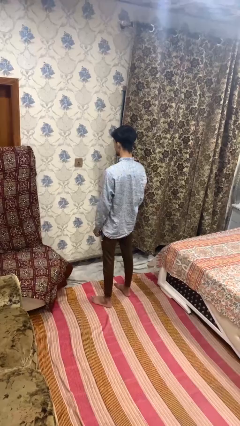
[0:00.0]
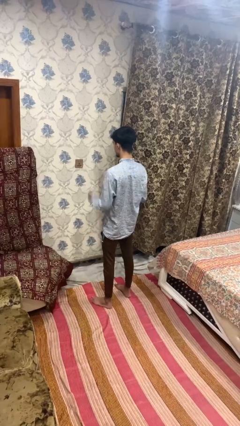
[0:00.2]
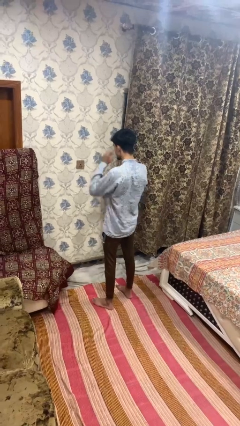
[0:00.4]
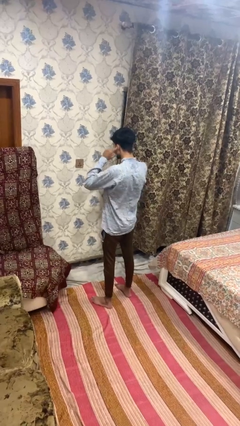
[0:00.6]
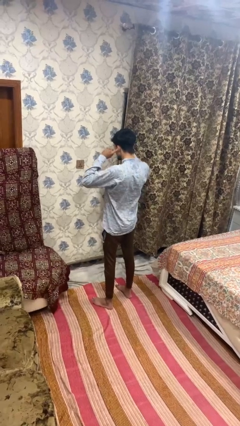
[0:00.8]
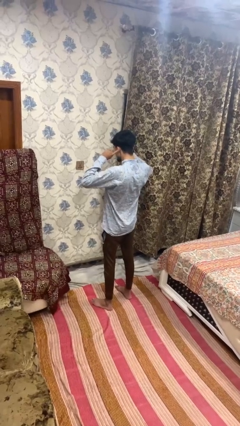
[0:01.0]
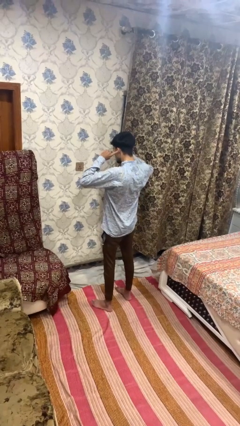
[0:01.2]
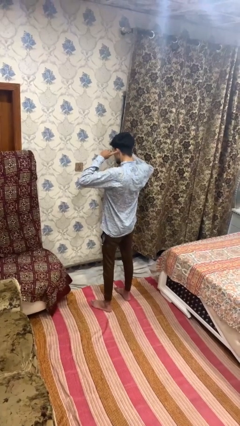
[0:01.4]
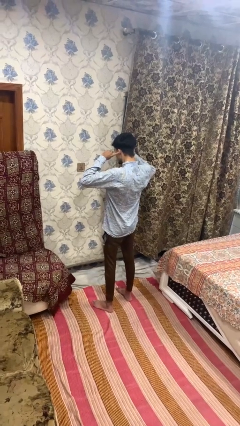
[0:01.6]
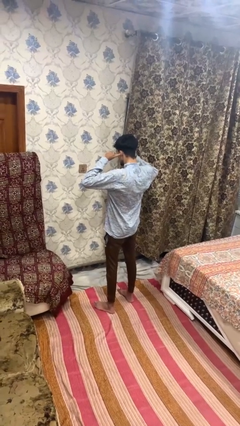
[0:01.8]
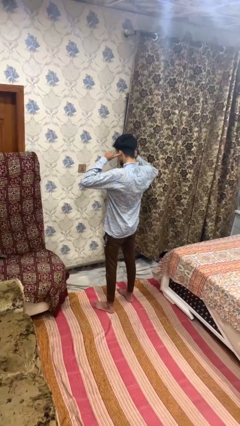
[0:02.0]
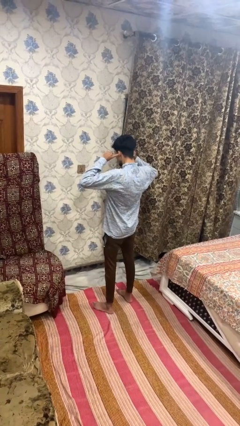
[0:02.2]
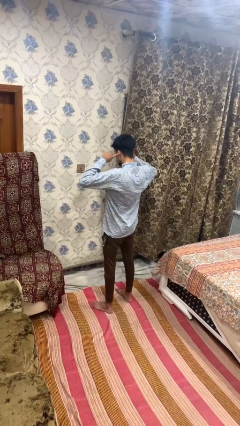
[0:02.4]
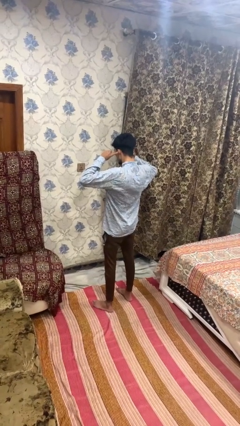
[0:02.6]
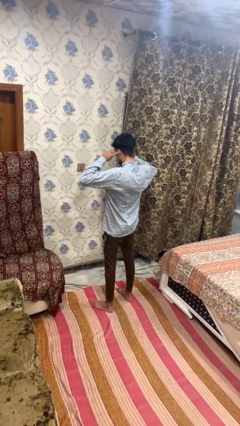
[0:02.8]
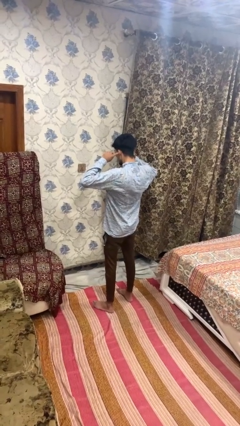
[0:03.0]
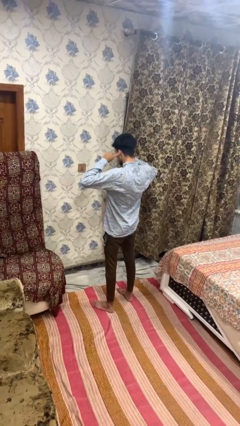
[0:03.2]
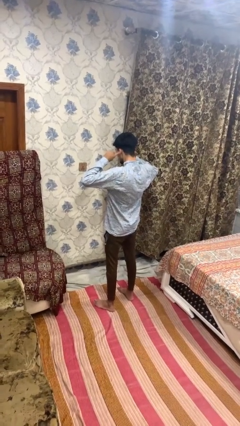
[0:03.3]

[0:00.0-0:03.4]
person puts fingers in ear

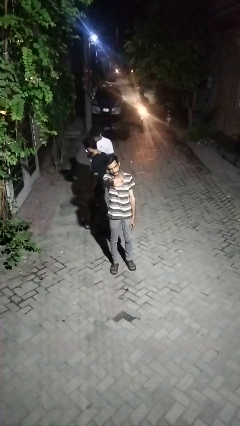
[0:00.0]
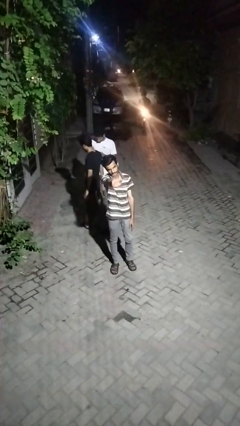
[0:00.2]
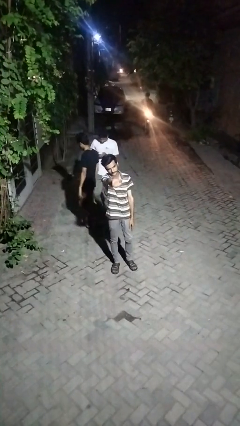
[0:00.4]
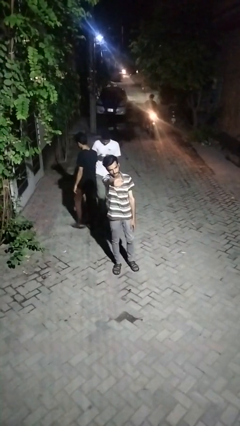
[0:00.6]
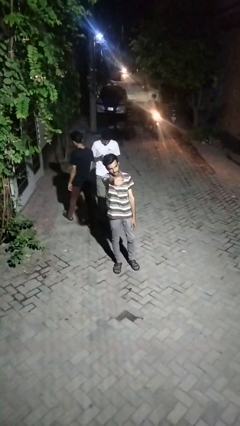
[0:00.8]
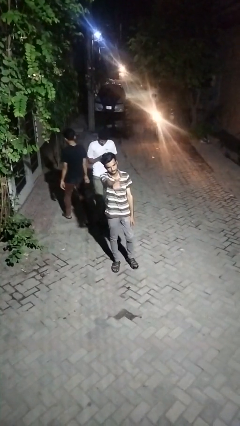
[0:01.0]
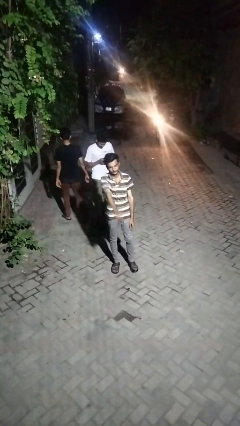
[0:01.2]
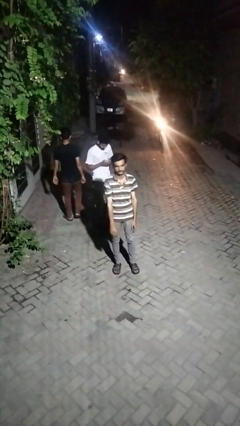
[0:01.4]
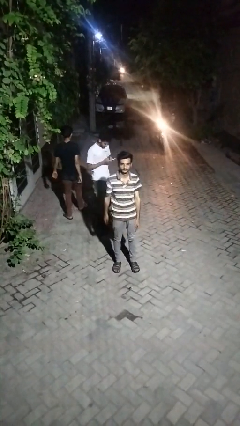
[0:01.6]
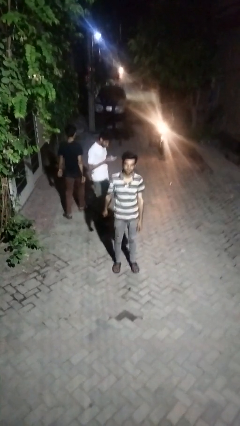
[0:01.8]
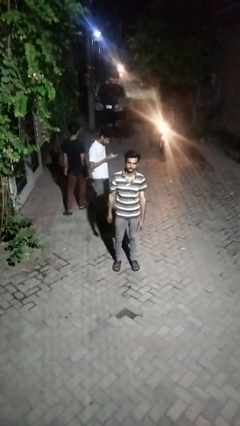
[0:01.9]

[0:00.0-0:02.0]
person waves at person

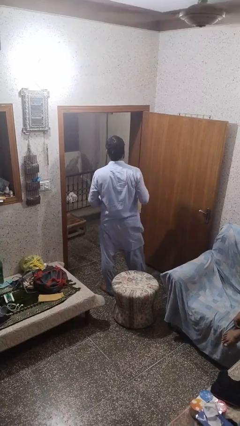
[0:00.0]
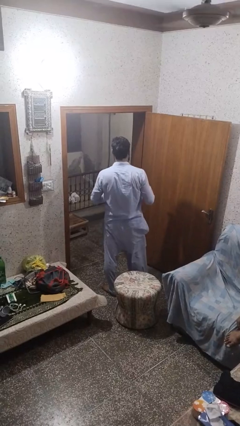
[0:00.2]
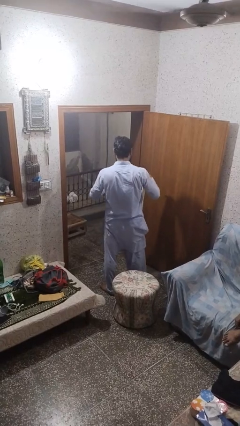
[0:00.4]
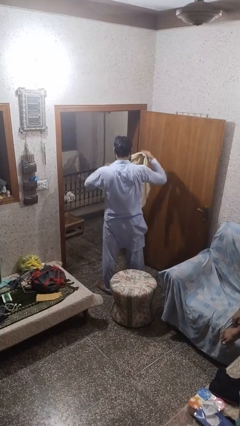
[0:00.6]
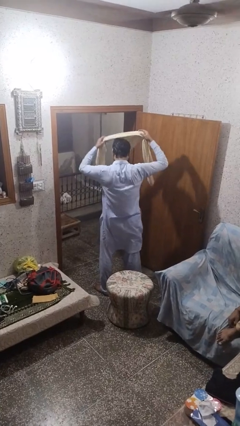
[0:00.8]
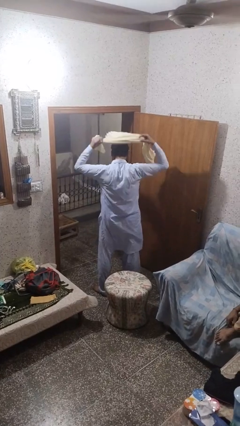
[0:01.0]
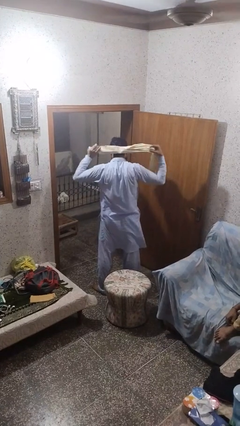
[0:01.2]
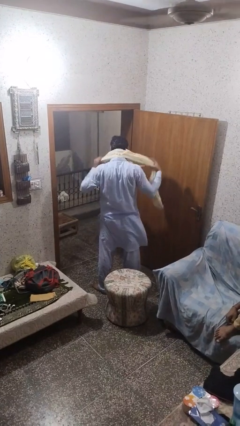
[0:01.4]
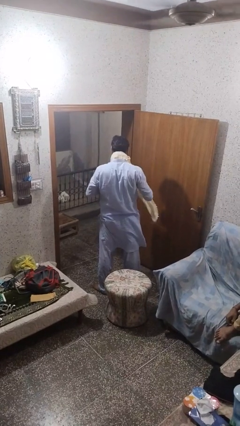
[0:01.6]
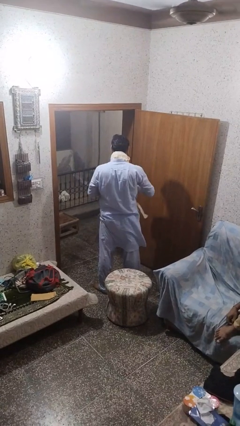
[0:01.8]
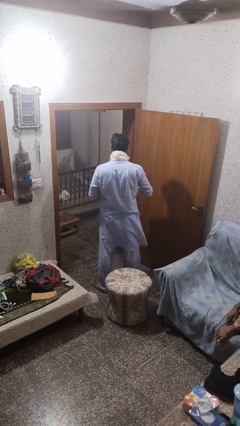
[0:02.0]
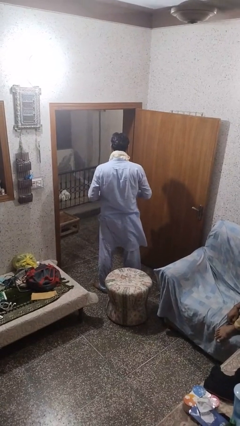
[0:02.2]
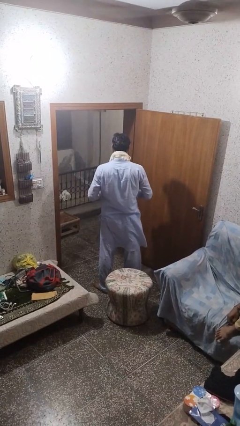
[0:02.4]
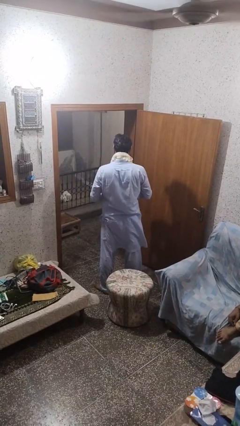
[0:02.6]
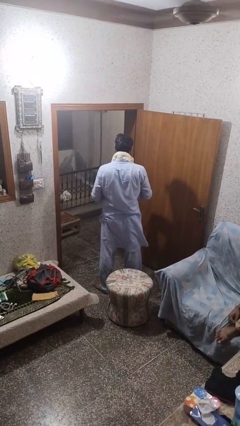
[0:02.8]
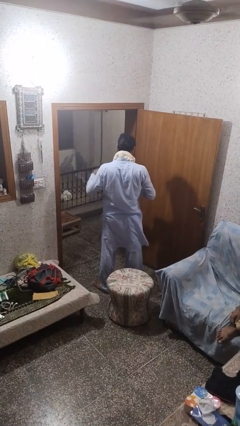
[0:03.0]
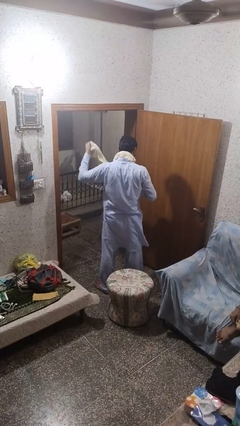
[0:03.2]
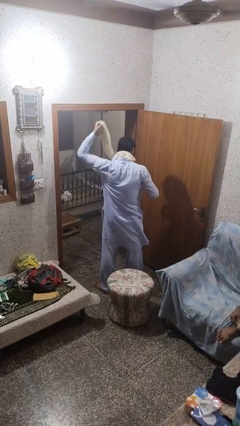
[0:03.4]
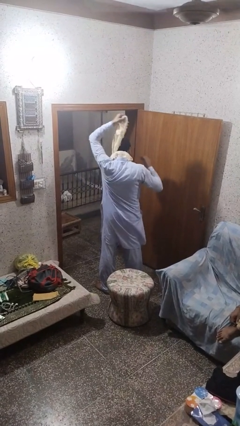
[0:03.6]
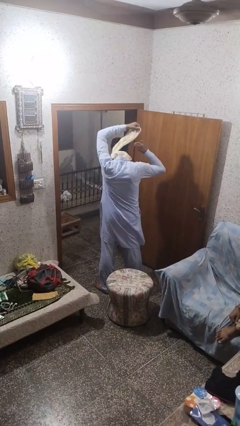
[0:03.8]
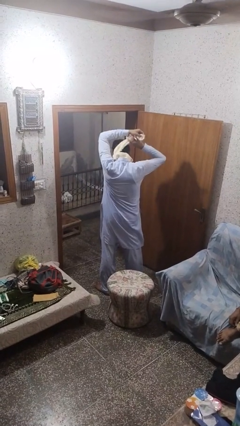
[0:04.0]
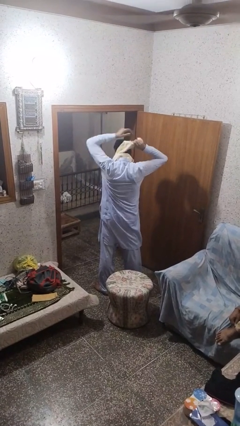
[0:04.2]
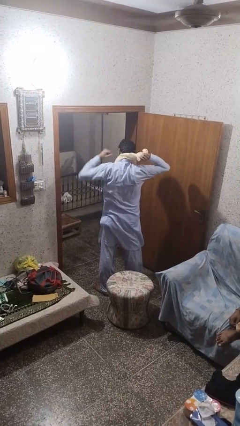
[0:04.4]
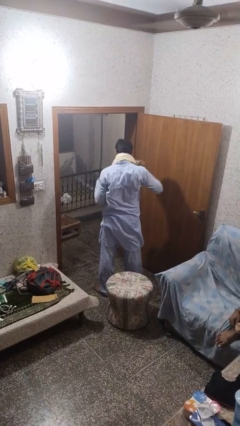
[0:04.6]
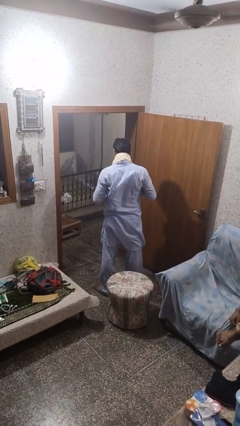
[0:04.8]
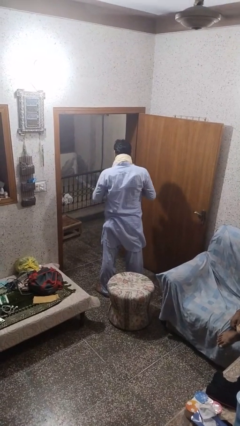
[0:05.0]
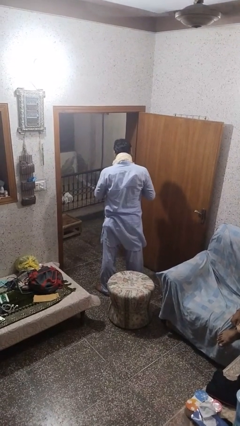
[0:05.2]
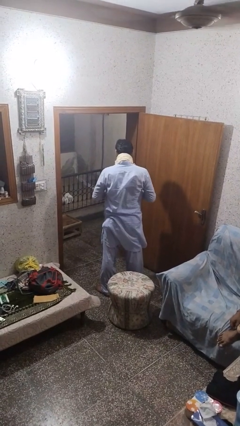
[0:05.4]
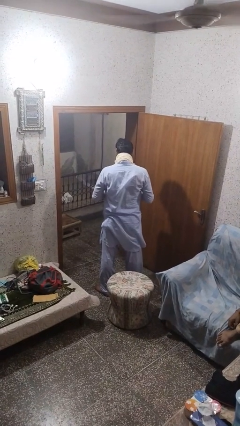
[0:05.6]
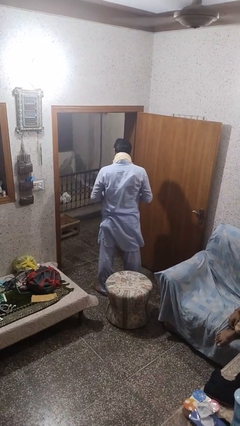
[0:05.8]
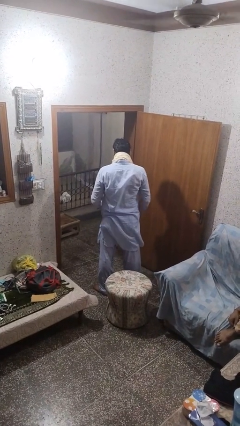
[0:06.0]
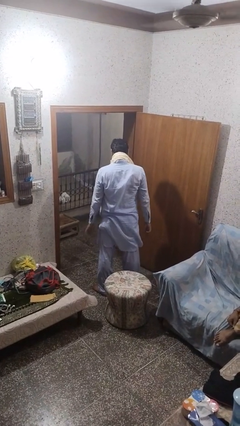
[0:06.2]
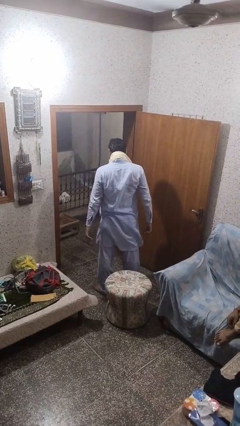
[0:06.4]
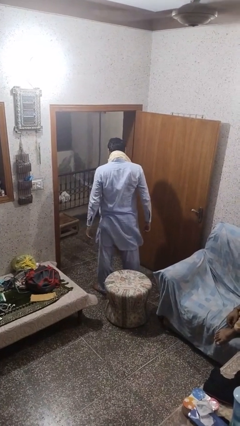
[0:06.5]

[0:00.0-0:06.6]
person puts on scarf

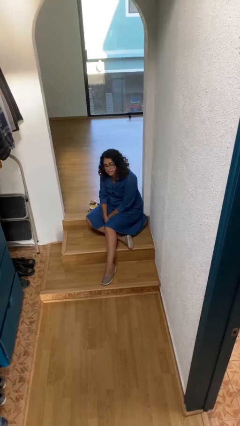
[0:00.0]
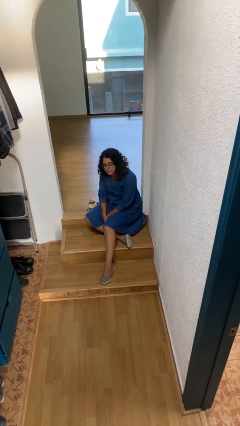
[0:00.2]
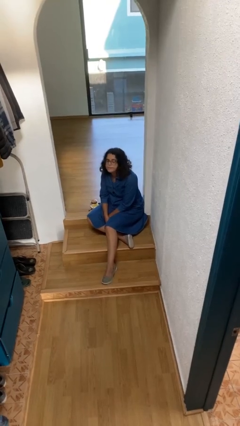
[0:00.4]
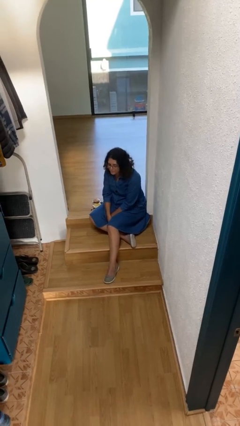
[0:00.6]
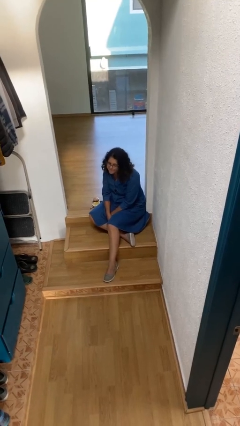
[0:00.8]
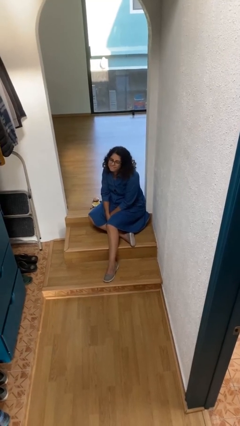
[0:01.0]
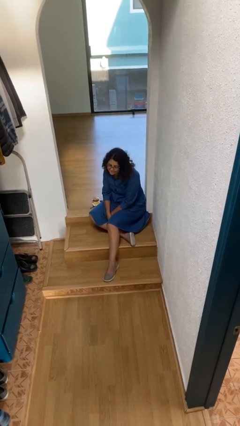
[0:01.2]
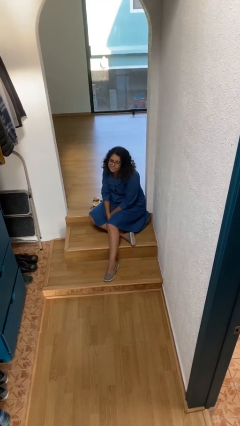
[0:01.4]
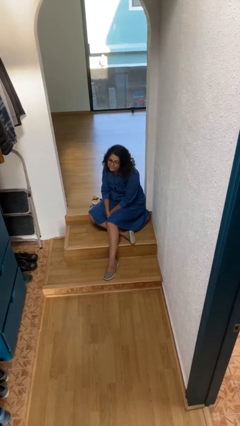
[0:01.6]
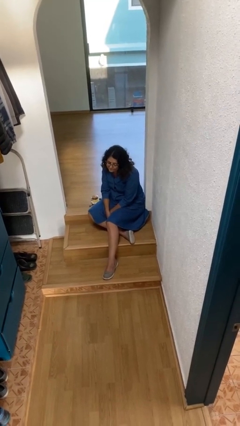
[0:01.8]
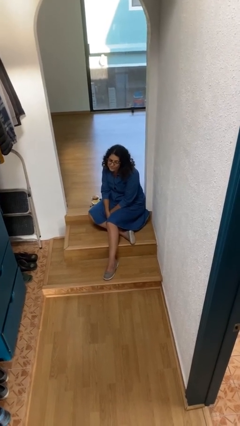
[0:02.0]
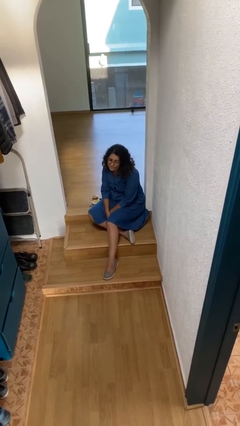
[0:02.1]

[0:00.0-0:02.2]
person nods head

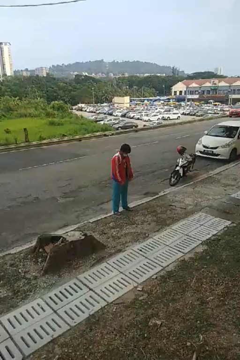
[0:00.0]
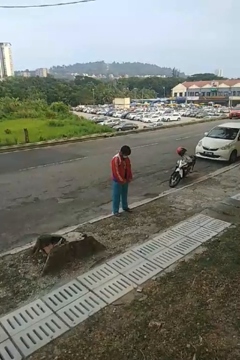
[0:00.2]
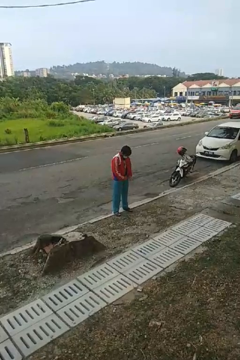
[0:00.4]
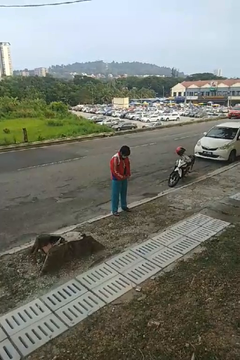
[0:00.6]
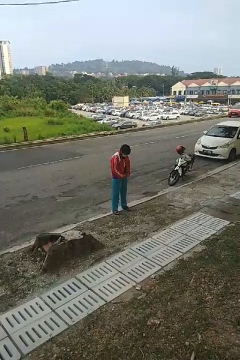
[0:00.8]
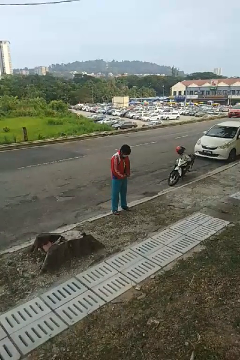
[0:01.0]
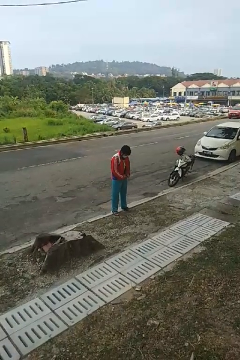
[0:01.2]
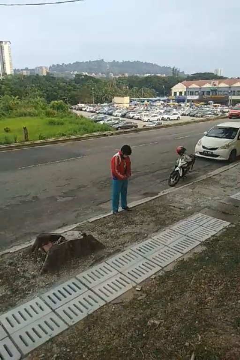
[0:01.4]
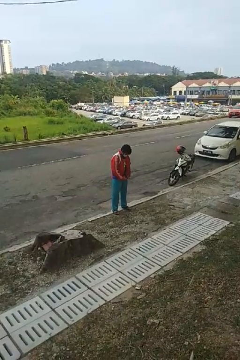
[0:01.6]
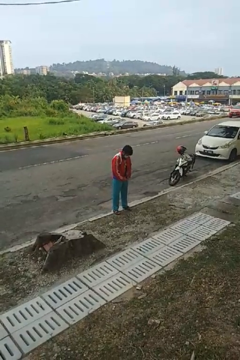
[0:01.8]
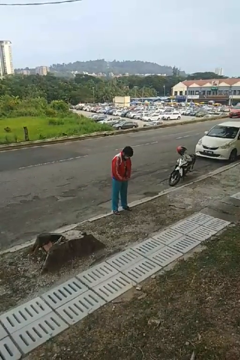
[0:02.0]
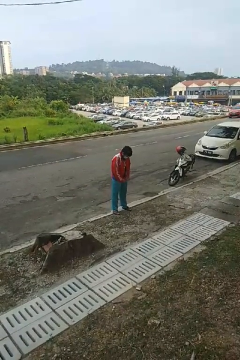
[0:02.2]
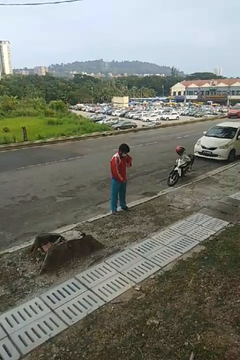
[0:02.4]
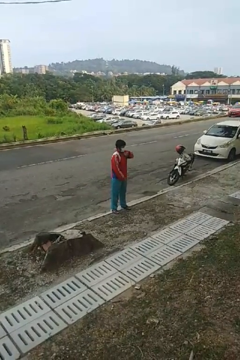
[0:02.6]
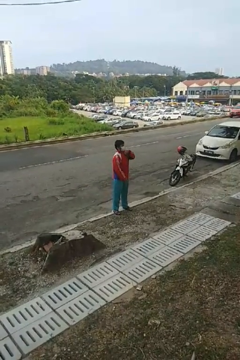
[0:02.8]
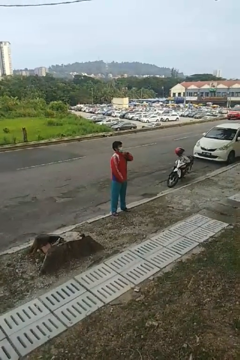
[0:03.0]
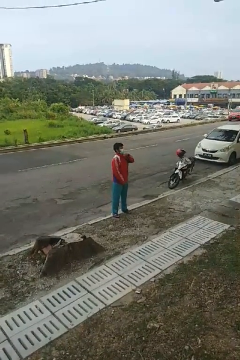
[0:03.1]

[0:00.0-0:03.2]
person zips up jacket

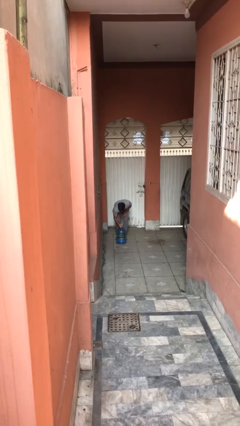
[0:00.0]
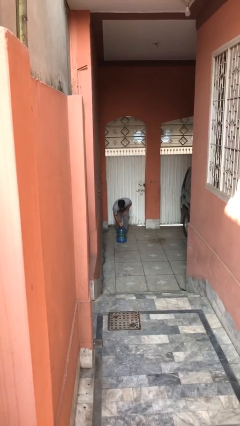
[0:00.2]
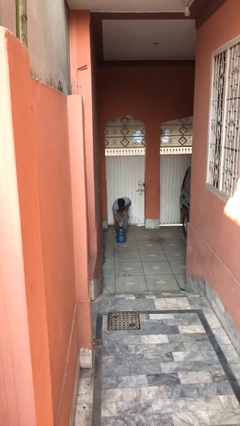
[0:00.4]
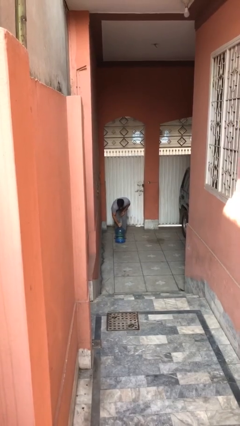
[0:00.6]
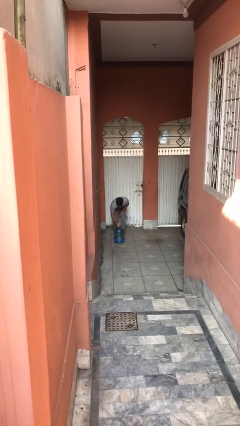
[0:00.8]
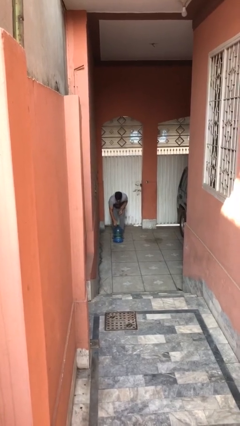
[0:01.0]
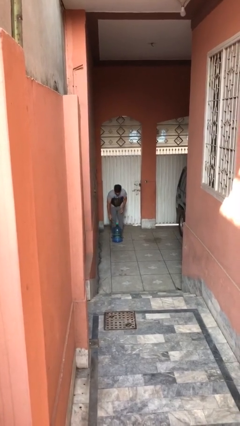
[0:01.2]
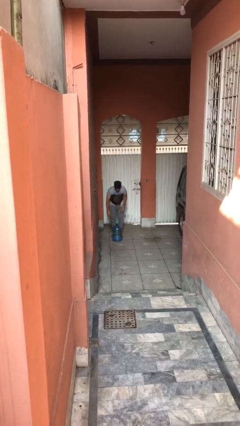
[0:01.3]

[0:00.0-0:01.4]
person puts down object on floor
